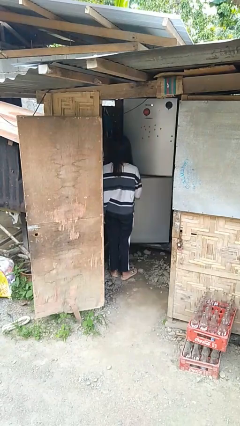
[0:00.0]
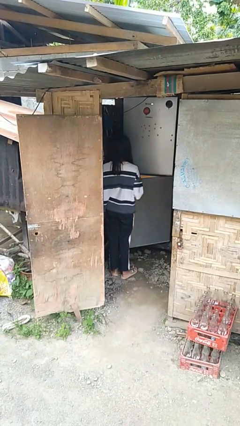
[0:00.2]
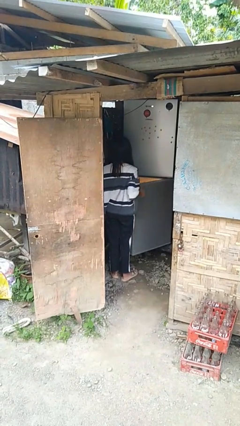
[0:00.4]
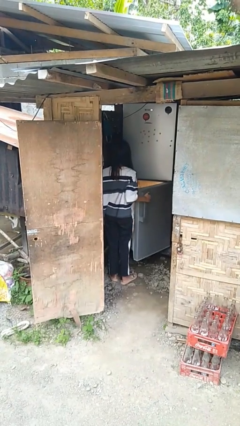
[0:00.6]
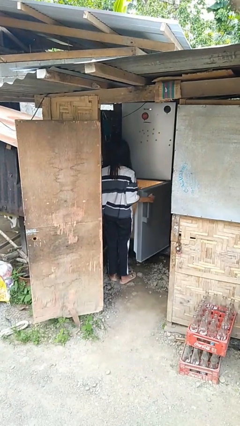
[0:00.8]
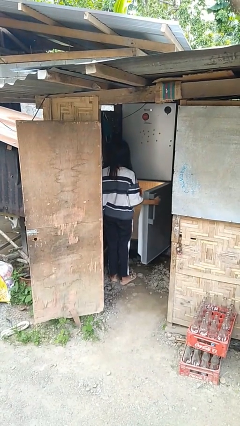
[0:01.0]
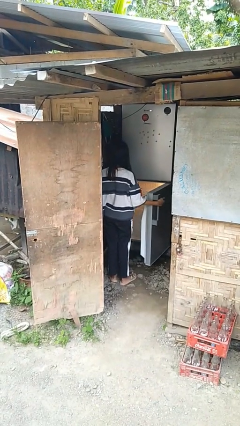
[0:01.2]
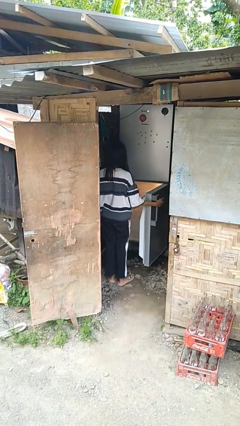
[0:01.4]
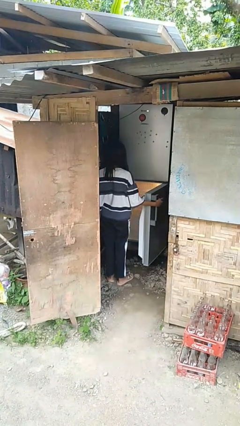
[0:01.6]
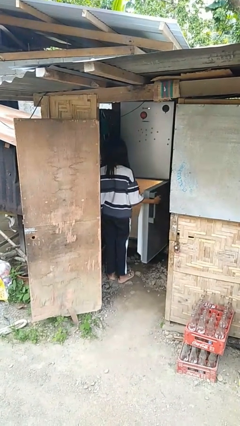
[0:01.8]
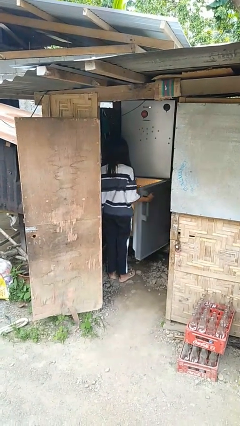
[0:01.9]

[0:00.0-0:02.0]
person opens refrigerator

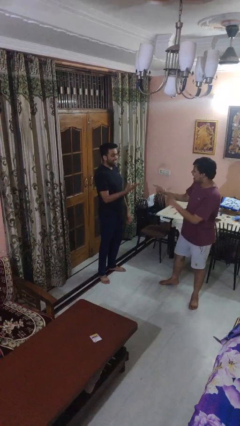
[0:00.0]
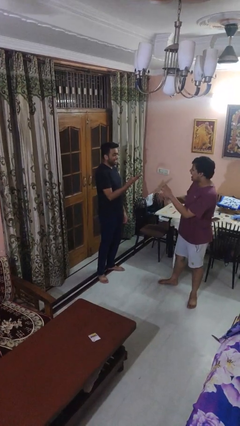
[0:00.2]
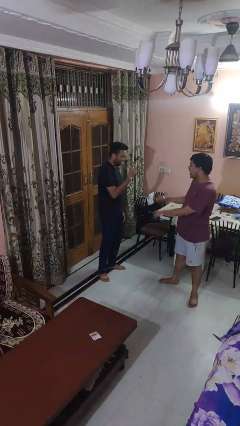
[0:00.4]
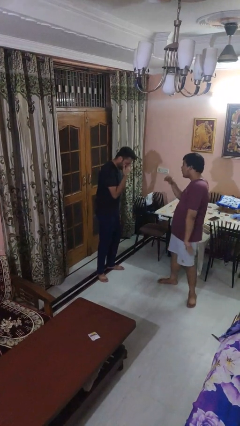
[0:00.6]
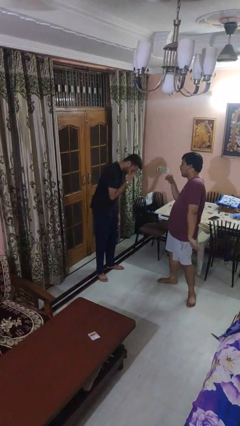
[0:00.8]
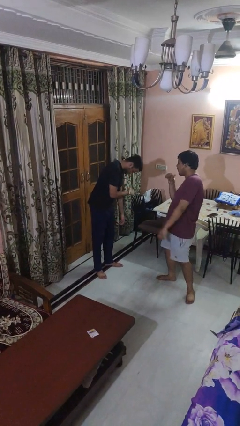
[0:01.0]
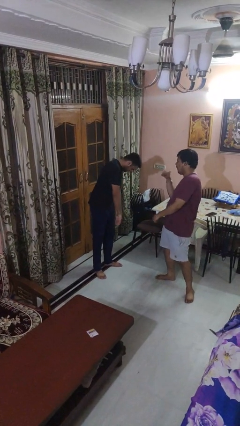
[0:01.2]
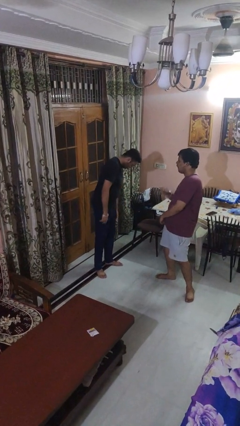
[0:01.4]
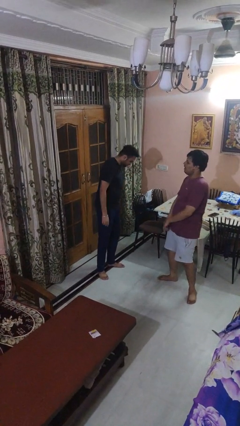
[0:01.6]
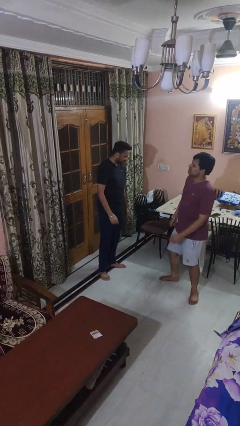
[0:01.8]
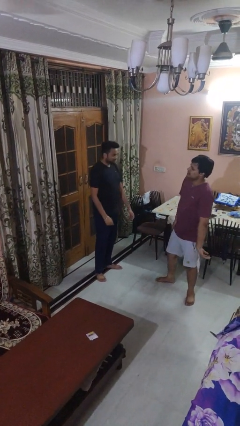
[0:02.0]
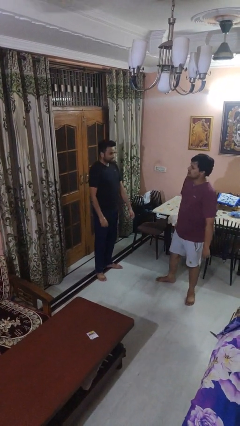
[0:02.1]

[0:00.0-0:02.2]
person laughs with person

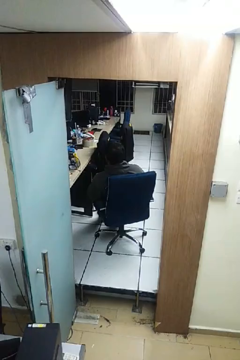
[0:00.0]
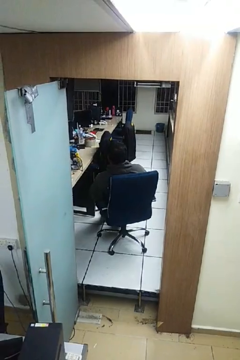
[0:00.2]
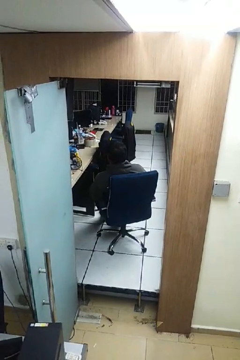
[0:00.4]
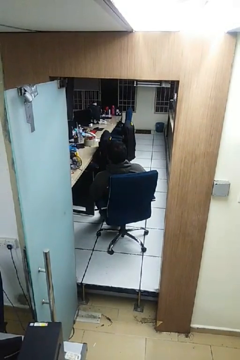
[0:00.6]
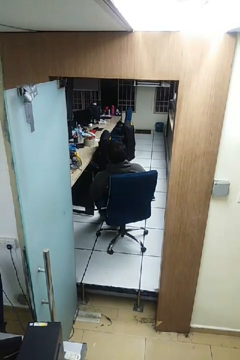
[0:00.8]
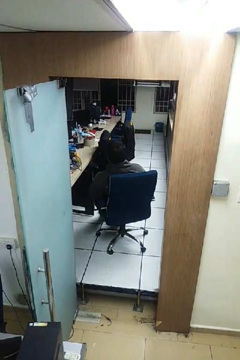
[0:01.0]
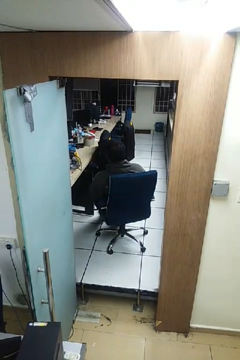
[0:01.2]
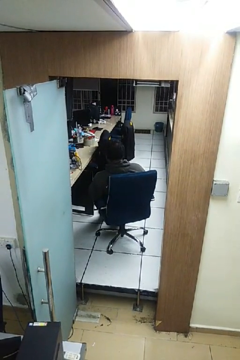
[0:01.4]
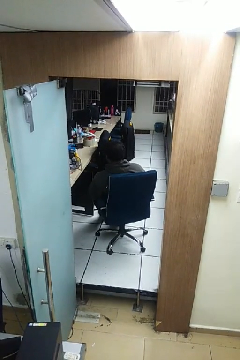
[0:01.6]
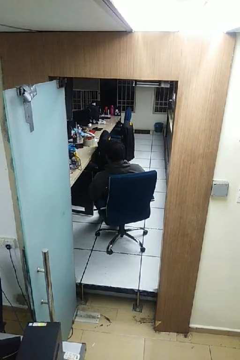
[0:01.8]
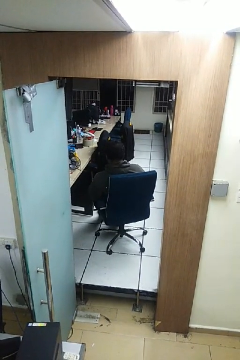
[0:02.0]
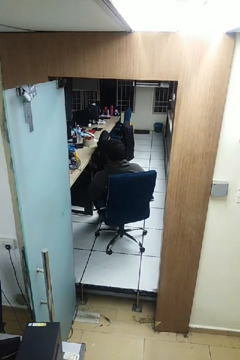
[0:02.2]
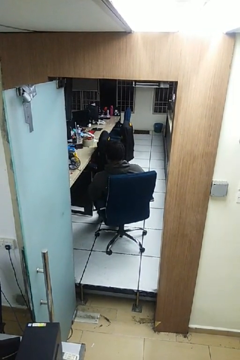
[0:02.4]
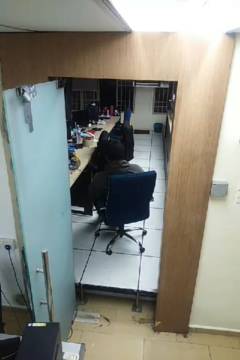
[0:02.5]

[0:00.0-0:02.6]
person nods head

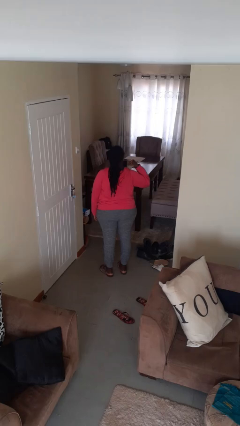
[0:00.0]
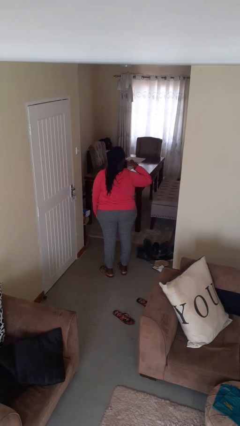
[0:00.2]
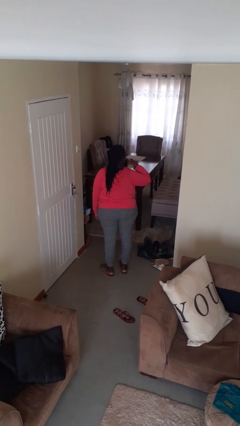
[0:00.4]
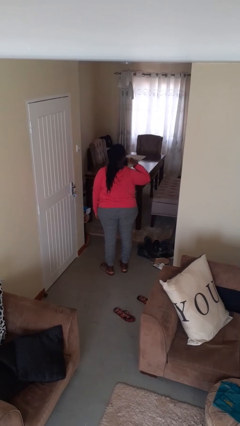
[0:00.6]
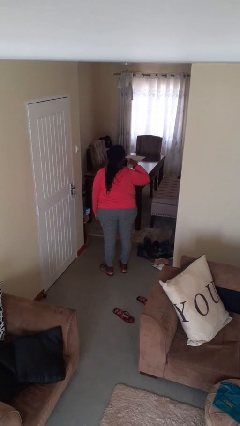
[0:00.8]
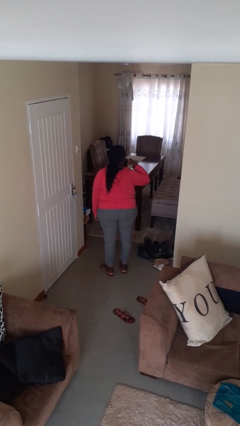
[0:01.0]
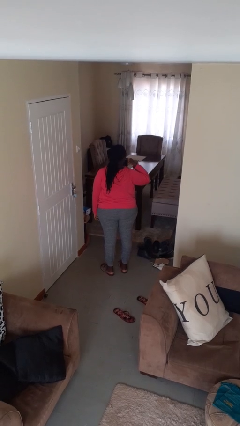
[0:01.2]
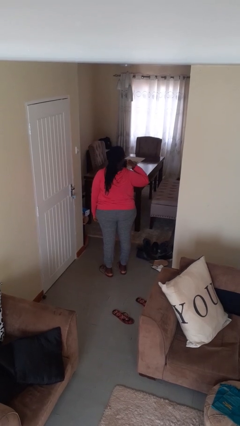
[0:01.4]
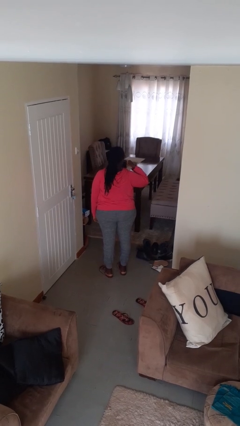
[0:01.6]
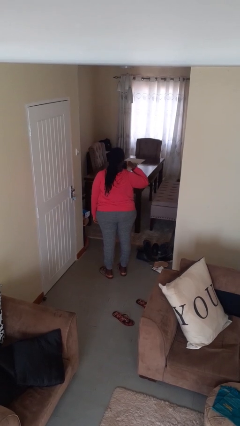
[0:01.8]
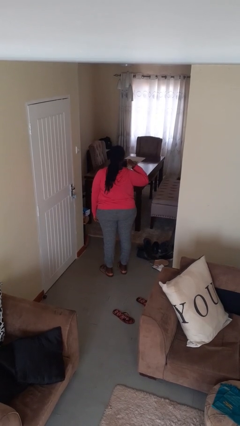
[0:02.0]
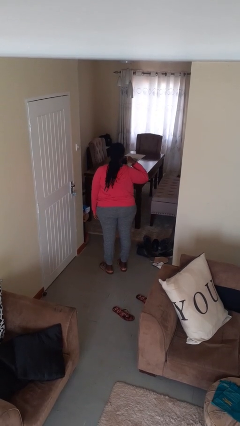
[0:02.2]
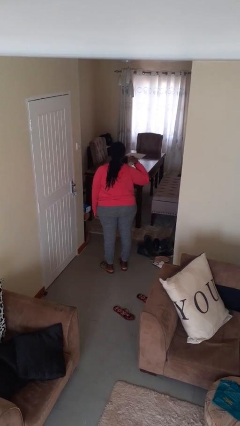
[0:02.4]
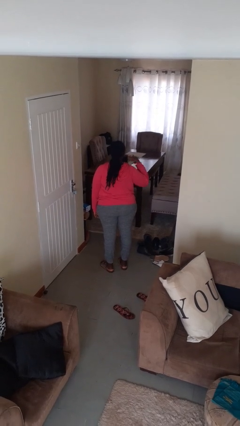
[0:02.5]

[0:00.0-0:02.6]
person gestures call me

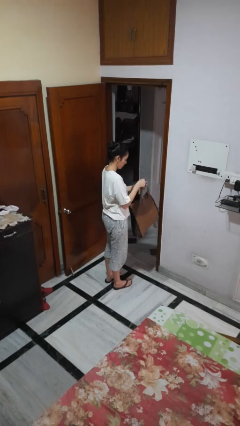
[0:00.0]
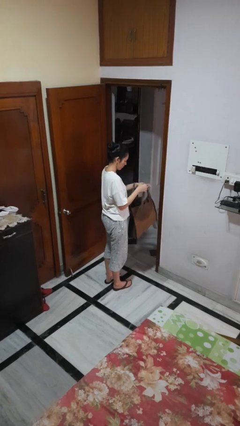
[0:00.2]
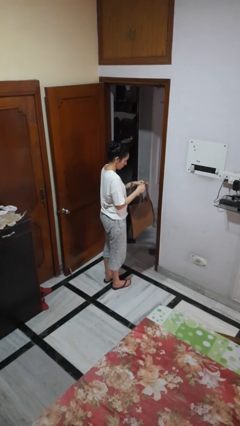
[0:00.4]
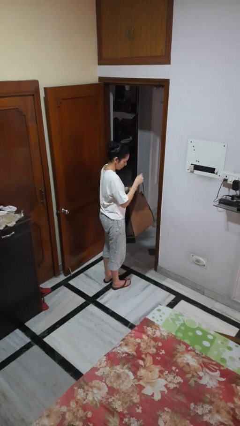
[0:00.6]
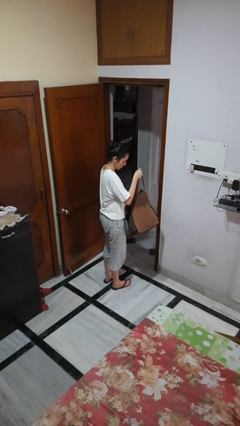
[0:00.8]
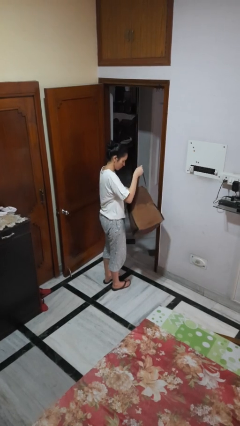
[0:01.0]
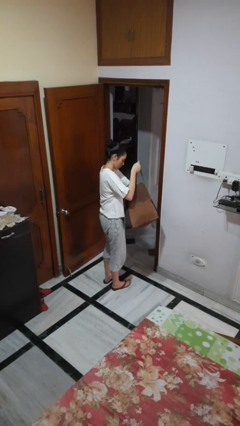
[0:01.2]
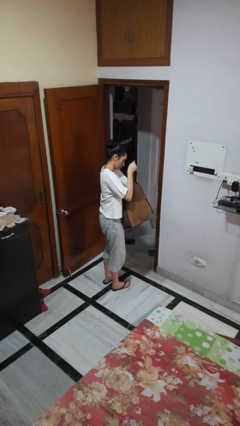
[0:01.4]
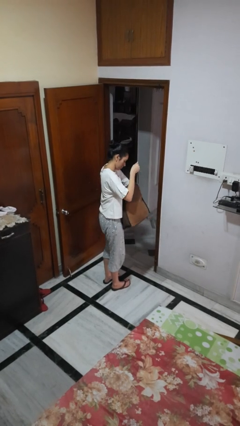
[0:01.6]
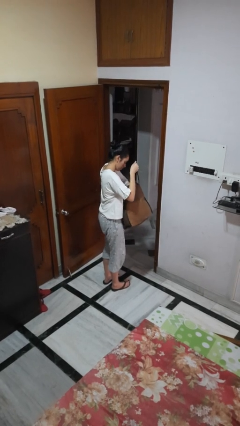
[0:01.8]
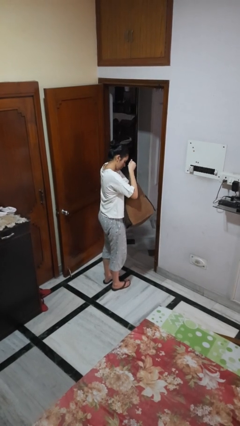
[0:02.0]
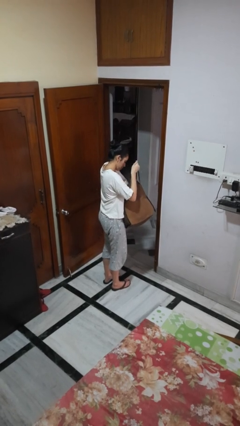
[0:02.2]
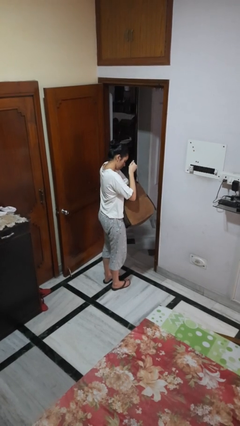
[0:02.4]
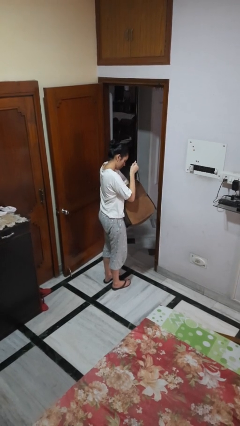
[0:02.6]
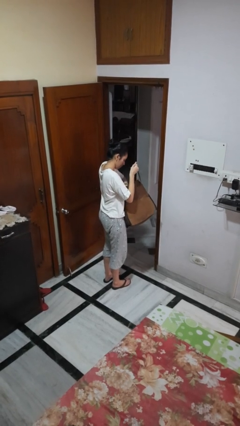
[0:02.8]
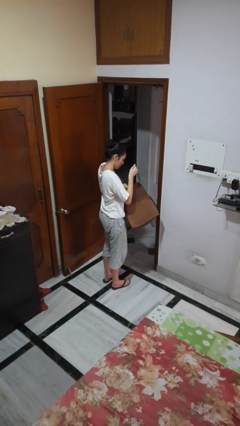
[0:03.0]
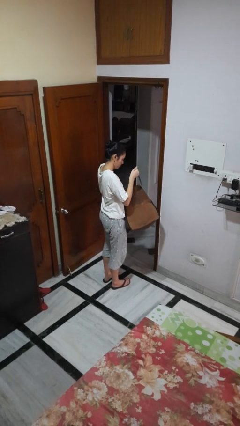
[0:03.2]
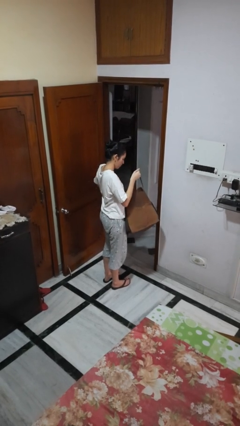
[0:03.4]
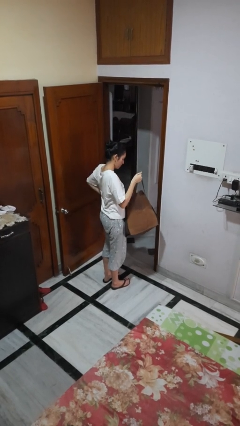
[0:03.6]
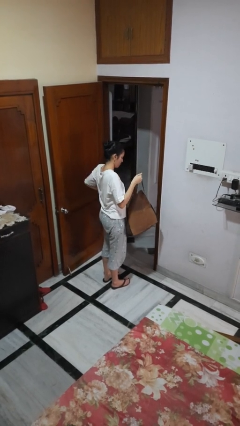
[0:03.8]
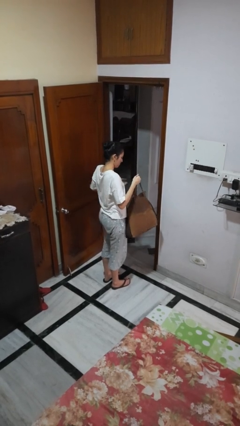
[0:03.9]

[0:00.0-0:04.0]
person searches in bag

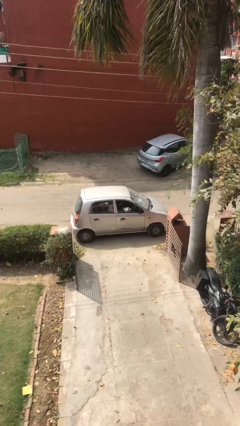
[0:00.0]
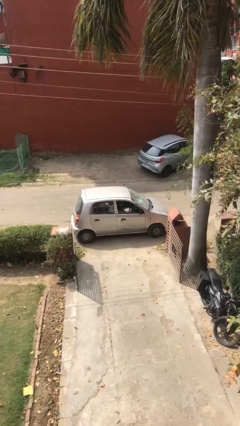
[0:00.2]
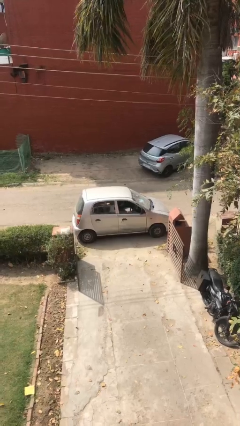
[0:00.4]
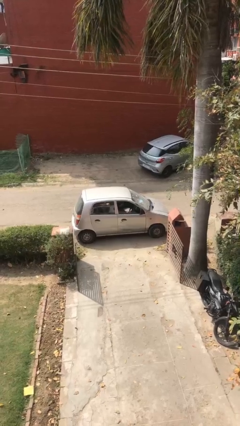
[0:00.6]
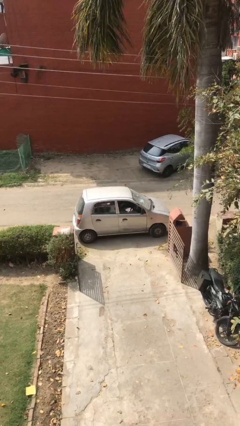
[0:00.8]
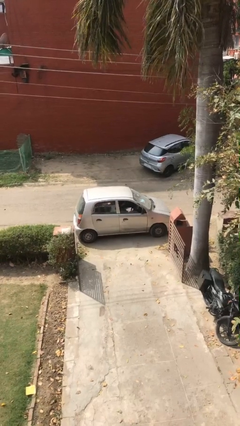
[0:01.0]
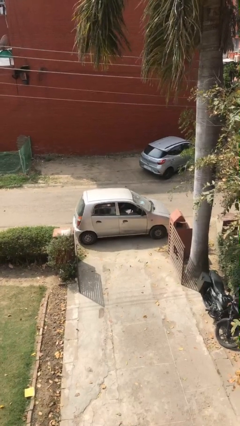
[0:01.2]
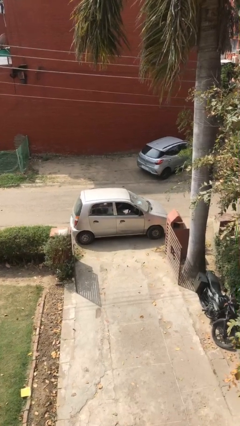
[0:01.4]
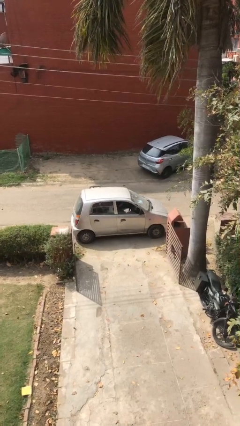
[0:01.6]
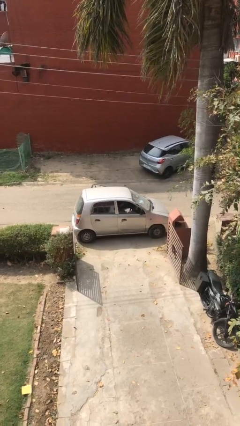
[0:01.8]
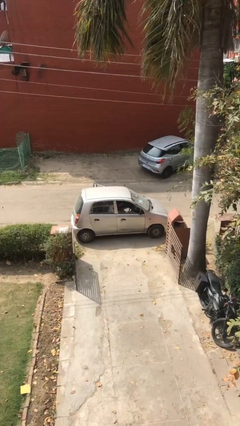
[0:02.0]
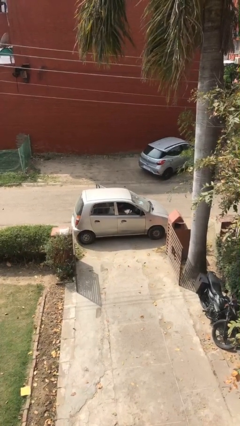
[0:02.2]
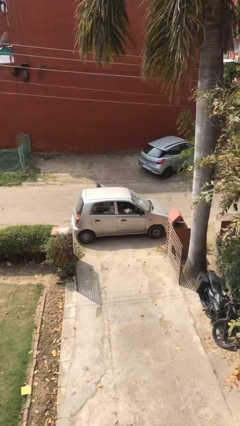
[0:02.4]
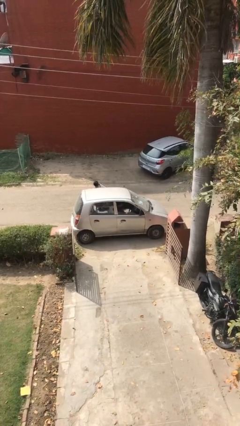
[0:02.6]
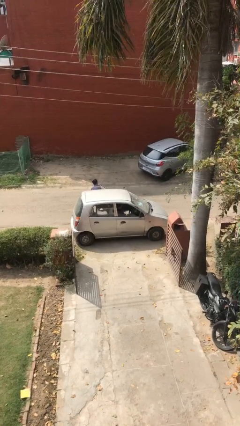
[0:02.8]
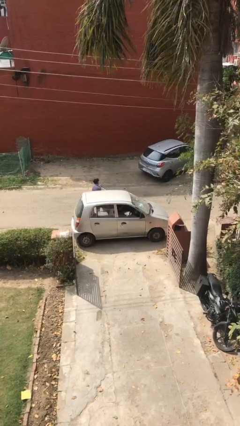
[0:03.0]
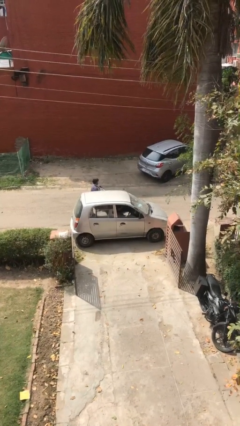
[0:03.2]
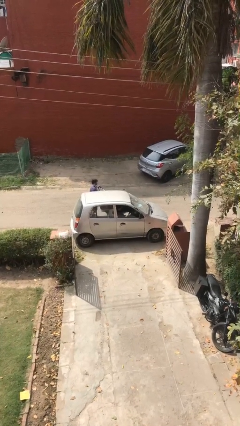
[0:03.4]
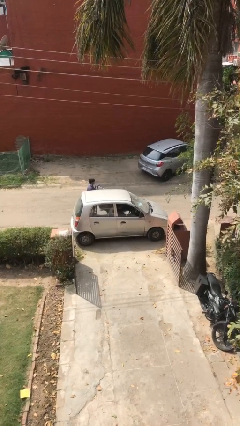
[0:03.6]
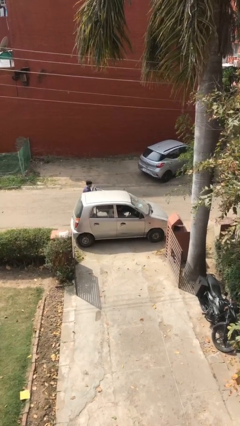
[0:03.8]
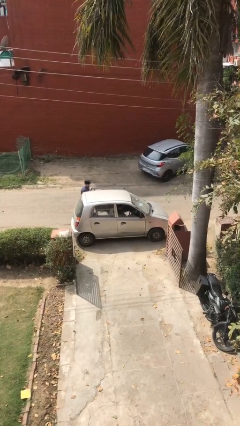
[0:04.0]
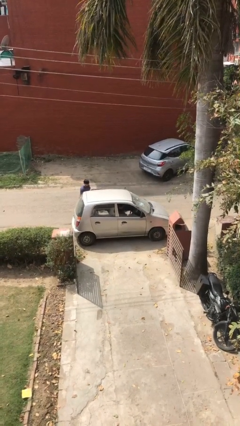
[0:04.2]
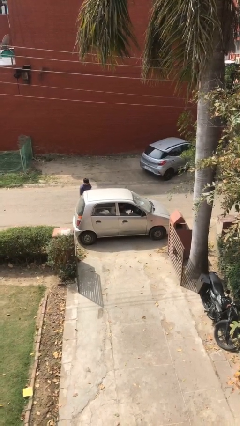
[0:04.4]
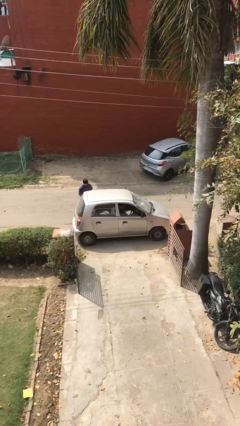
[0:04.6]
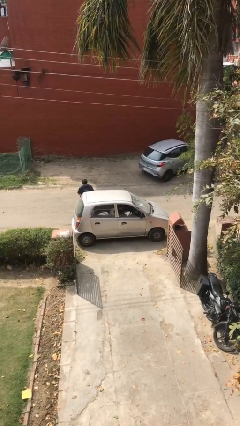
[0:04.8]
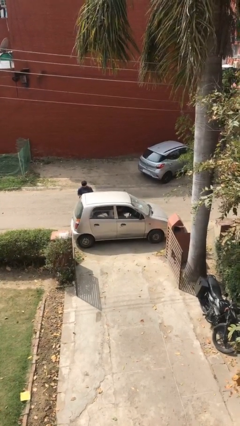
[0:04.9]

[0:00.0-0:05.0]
car drops off person
